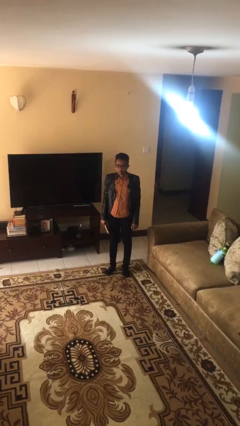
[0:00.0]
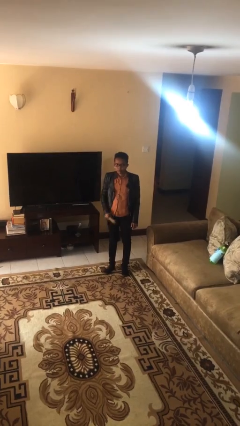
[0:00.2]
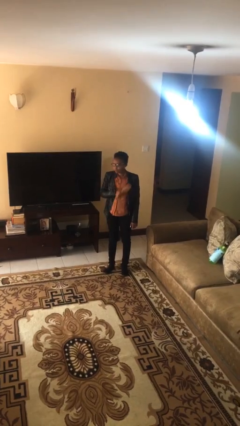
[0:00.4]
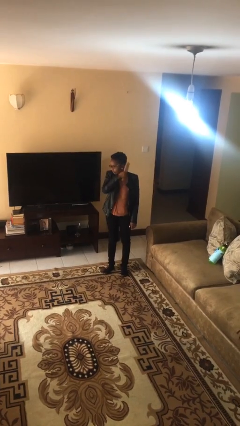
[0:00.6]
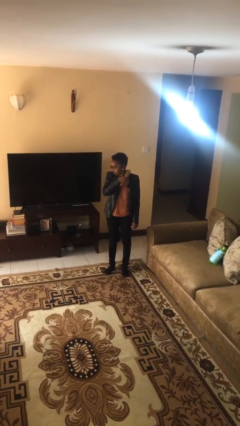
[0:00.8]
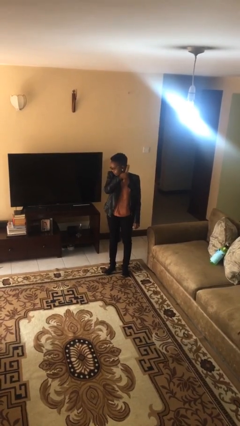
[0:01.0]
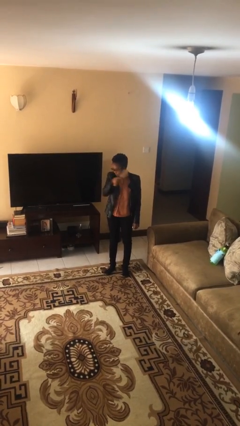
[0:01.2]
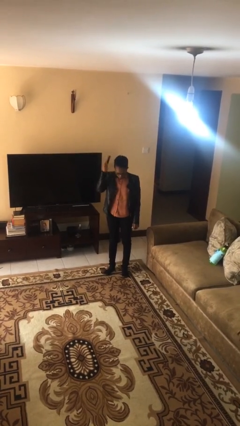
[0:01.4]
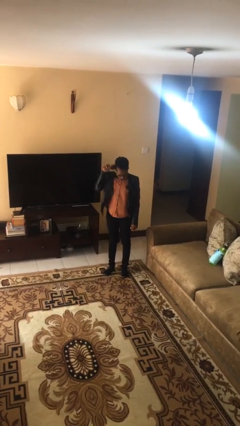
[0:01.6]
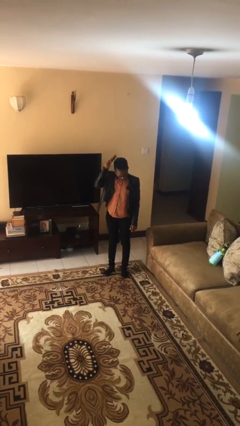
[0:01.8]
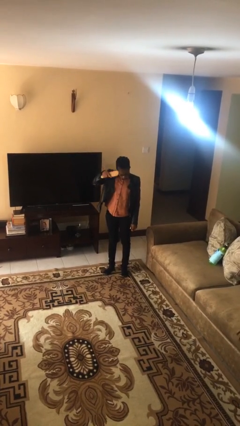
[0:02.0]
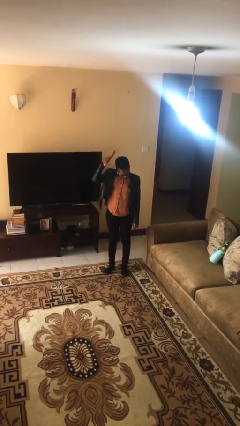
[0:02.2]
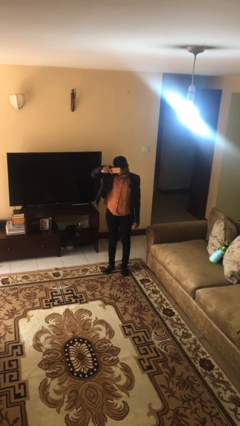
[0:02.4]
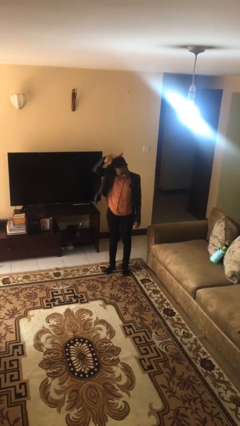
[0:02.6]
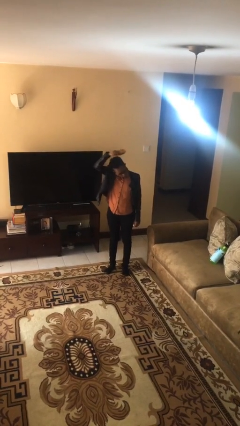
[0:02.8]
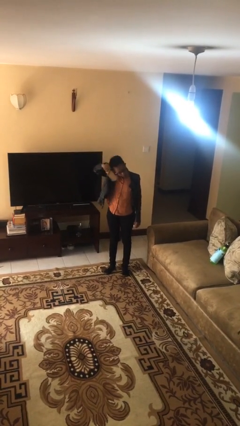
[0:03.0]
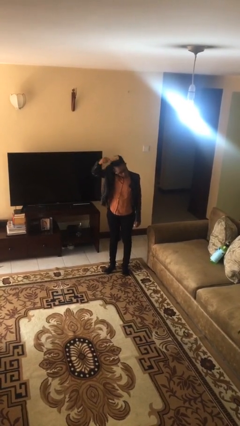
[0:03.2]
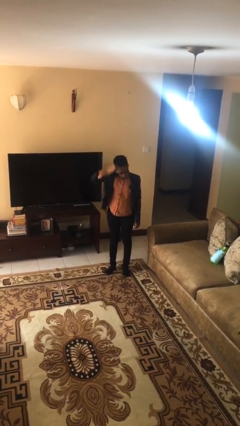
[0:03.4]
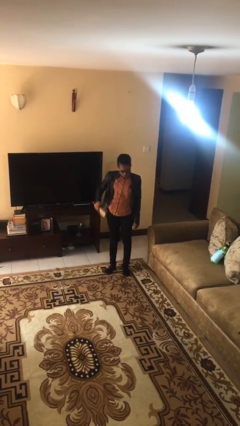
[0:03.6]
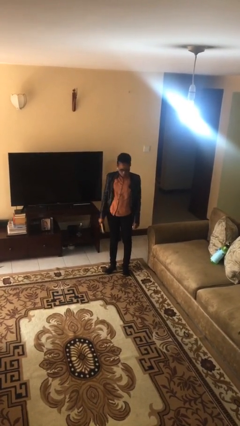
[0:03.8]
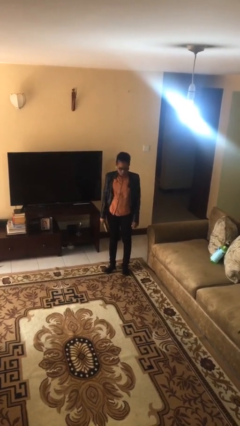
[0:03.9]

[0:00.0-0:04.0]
person brushes hair

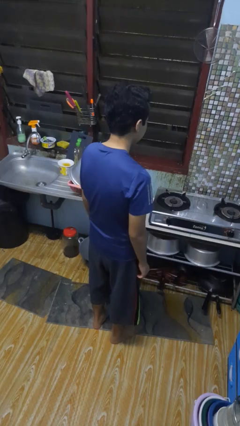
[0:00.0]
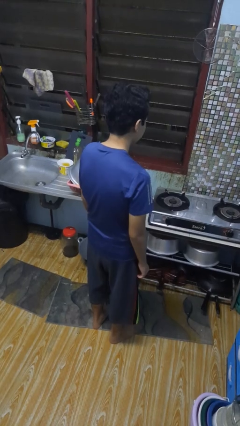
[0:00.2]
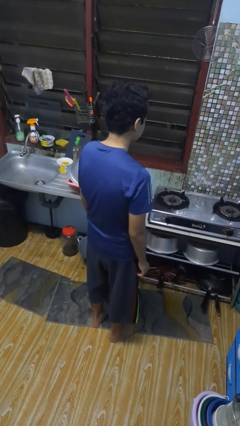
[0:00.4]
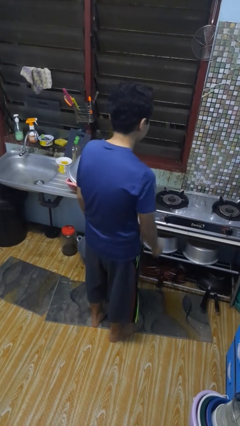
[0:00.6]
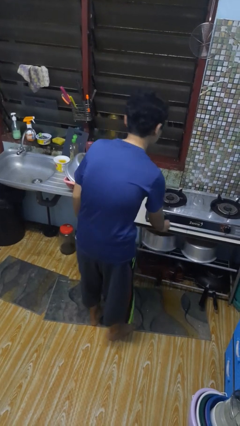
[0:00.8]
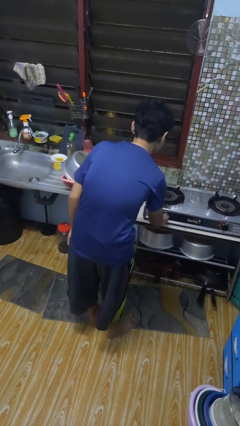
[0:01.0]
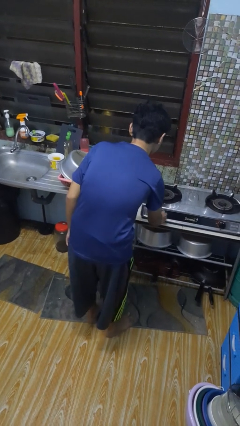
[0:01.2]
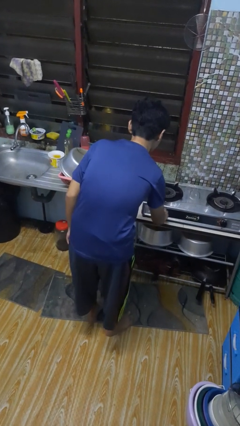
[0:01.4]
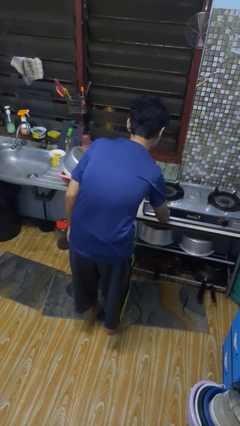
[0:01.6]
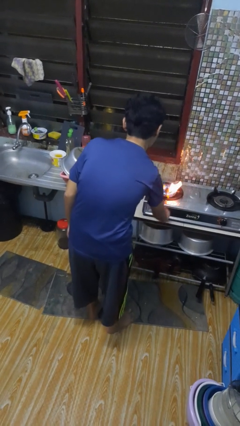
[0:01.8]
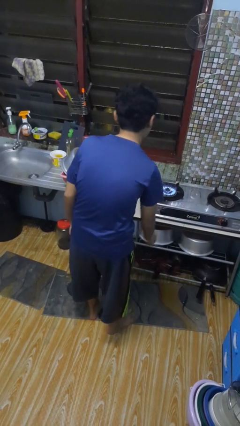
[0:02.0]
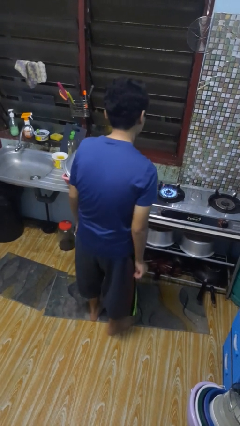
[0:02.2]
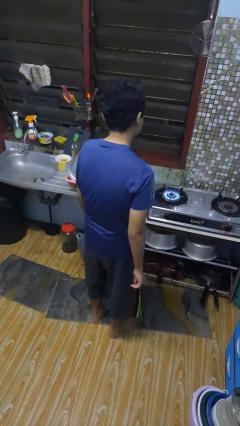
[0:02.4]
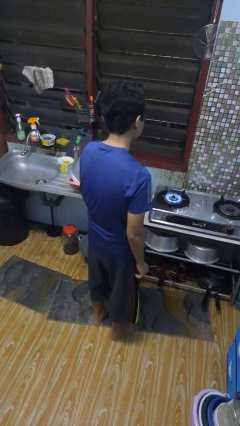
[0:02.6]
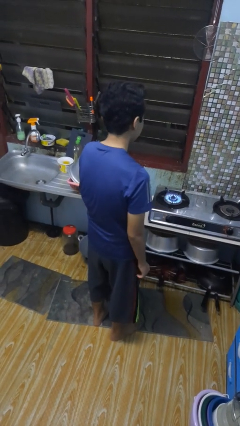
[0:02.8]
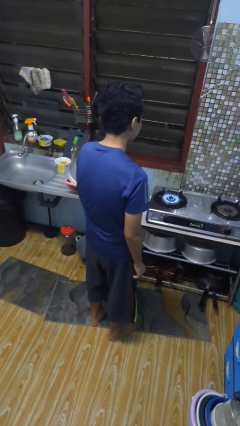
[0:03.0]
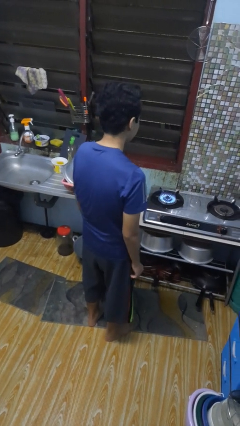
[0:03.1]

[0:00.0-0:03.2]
person turns on stovetop

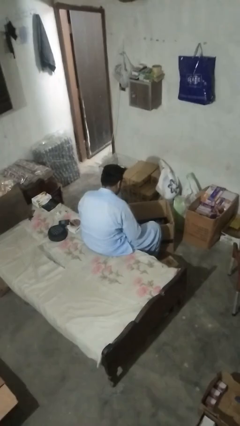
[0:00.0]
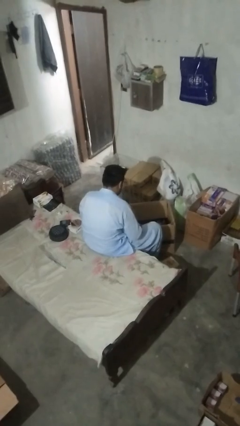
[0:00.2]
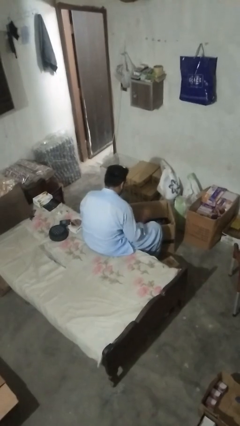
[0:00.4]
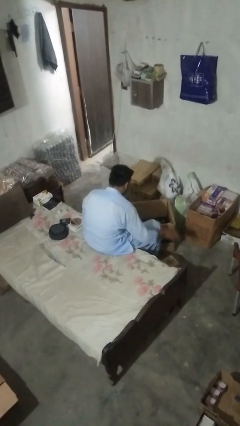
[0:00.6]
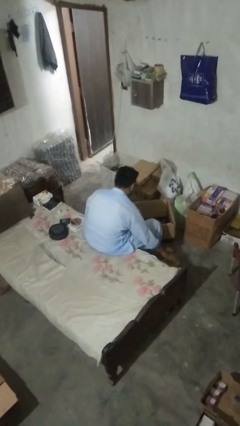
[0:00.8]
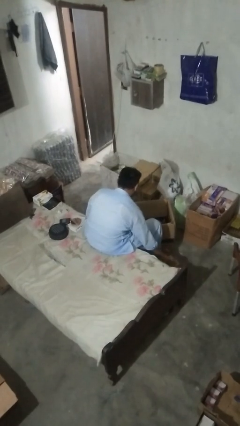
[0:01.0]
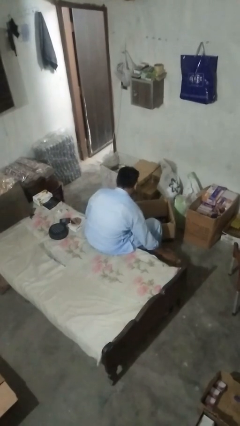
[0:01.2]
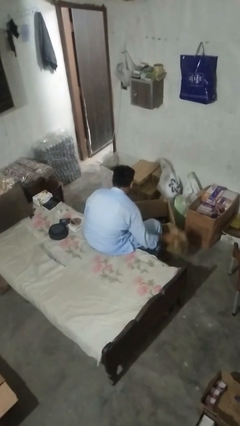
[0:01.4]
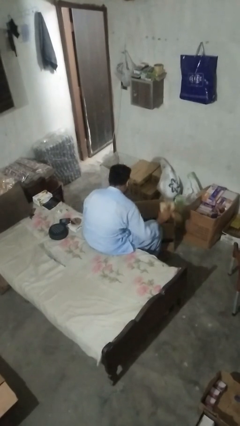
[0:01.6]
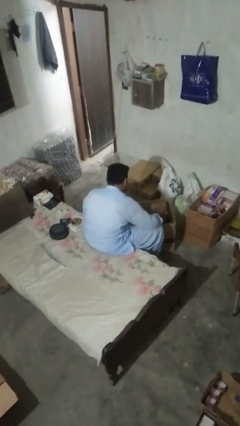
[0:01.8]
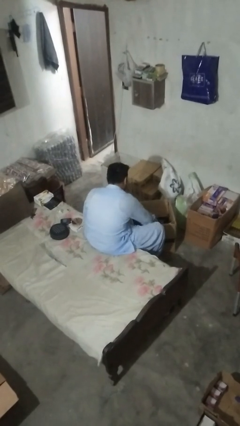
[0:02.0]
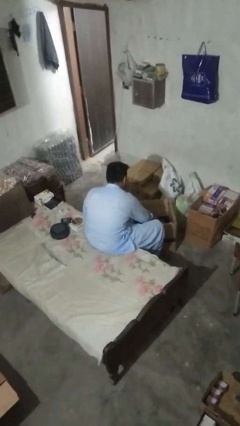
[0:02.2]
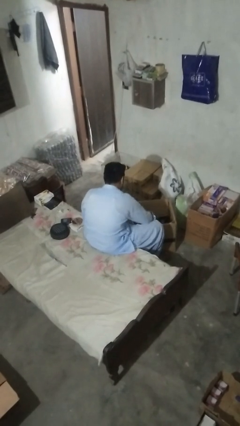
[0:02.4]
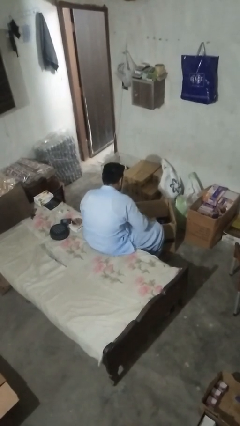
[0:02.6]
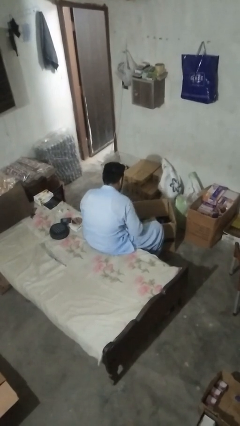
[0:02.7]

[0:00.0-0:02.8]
person puts object into box

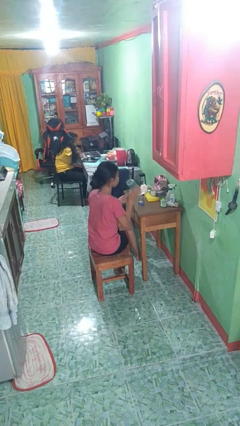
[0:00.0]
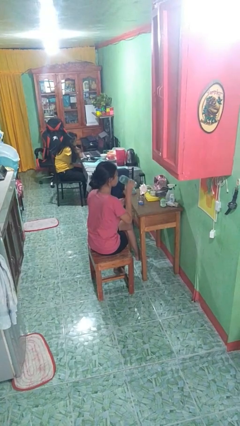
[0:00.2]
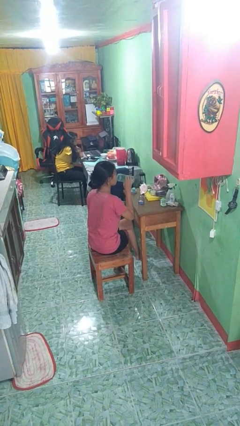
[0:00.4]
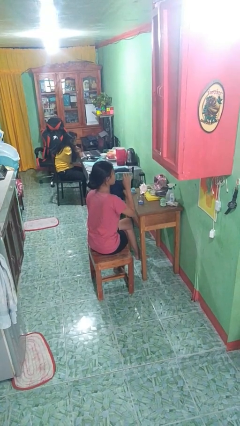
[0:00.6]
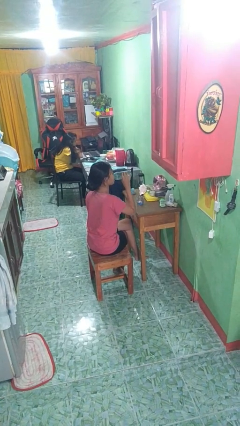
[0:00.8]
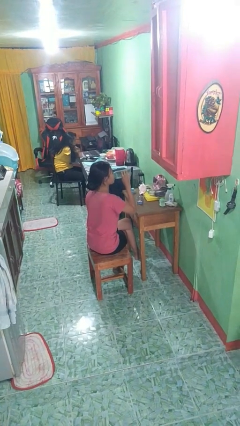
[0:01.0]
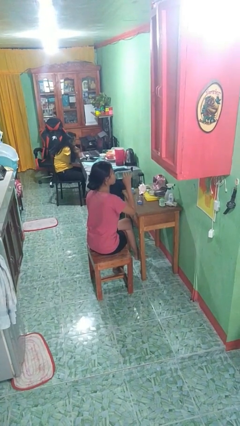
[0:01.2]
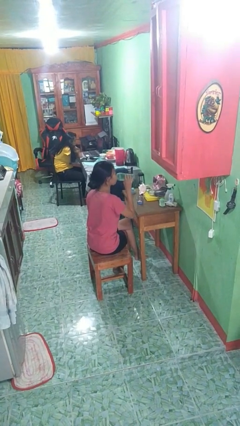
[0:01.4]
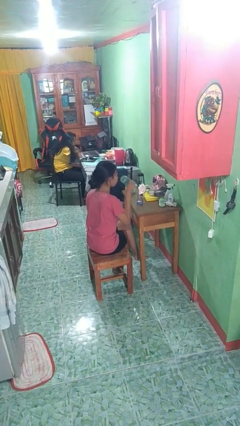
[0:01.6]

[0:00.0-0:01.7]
person drinks from cup

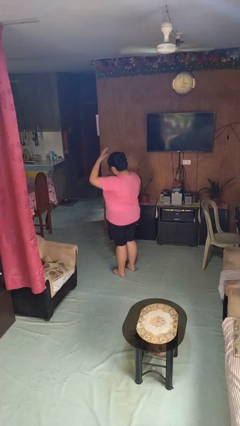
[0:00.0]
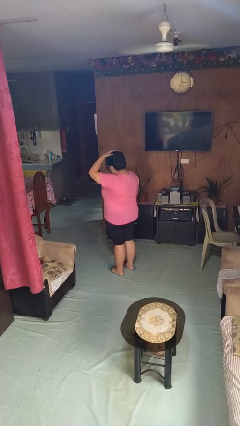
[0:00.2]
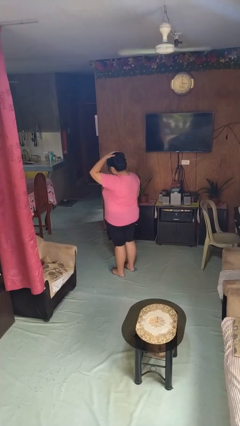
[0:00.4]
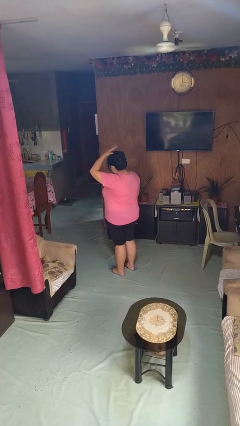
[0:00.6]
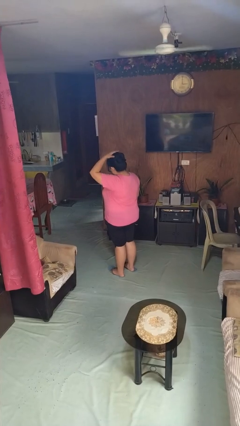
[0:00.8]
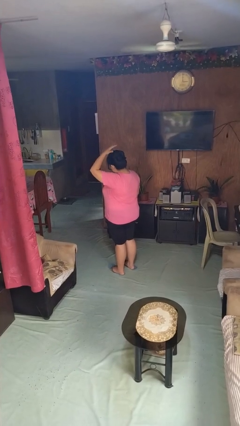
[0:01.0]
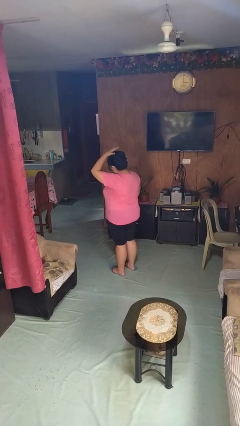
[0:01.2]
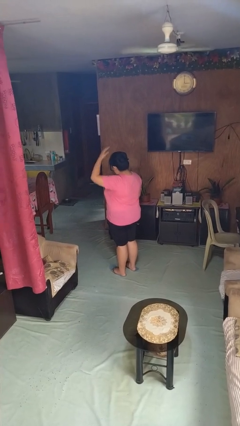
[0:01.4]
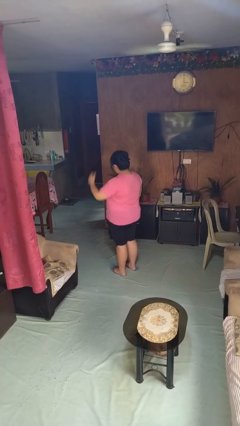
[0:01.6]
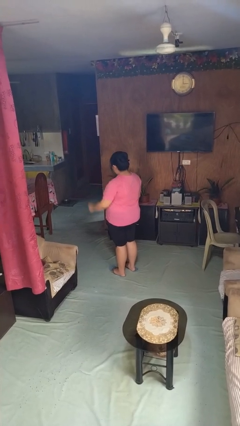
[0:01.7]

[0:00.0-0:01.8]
person pats head

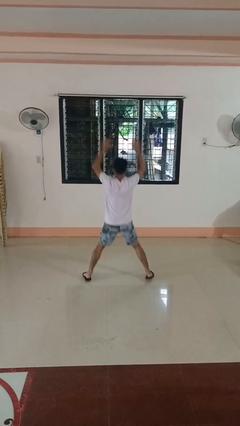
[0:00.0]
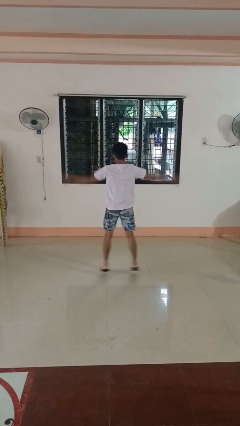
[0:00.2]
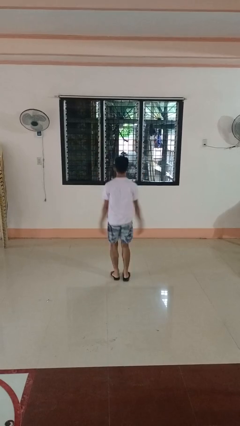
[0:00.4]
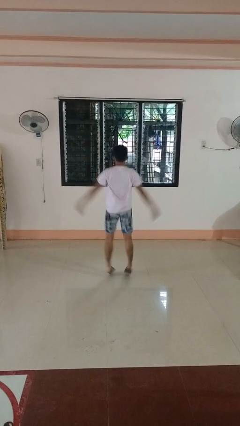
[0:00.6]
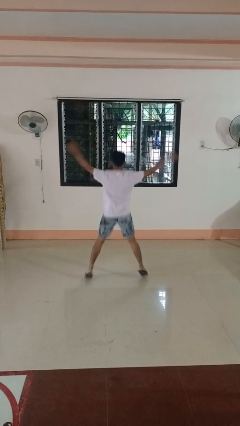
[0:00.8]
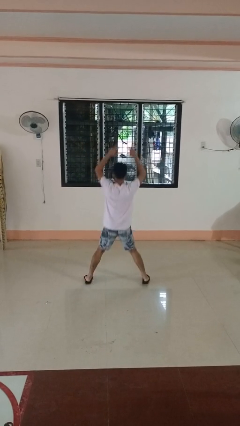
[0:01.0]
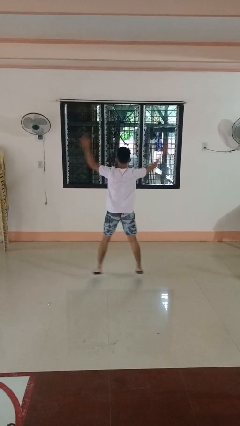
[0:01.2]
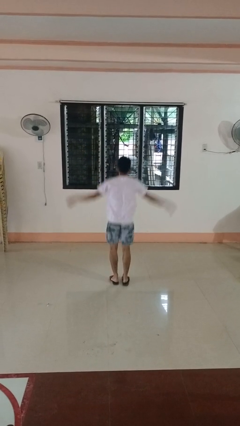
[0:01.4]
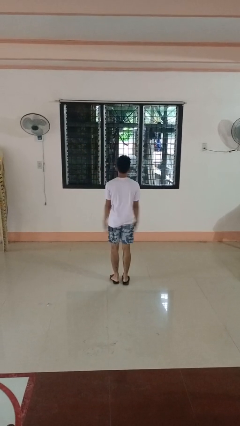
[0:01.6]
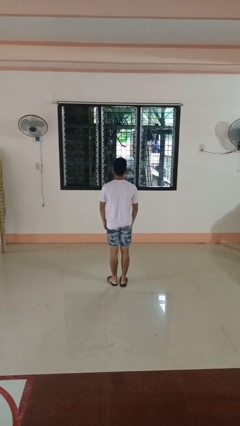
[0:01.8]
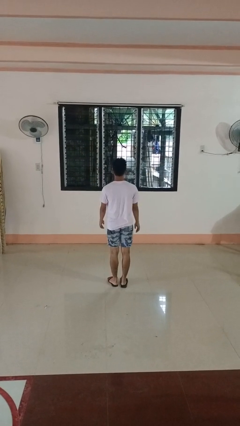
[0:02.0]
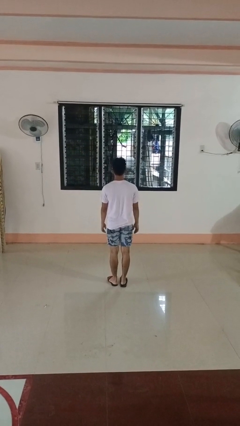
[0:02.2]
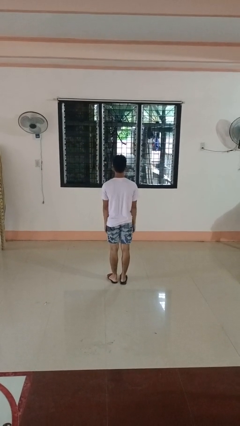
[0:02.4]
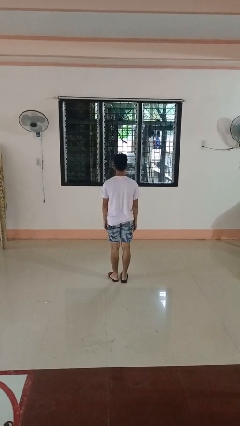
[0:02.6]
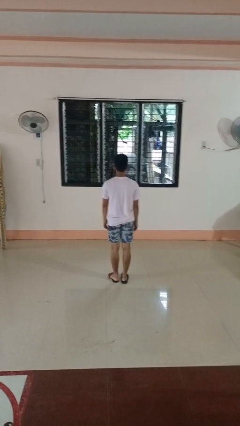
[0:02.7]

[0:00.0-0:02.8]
person exercises with jumping jacks

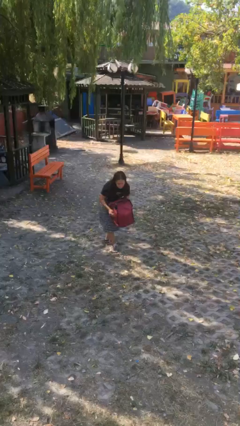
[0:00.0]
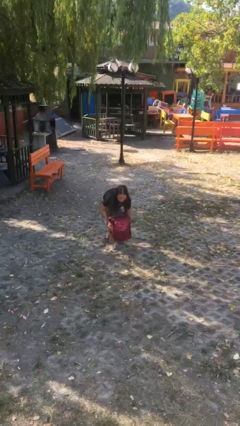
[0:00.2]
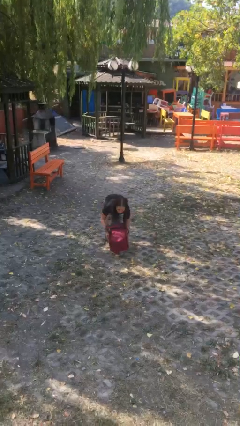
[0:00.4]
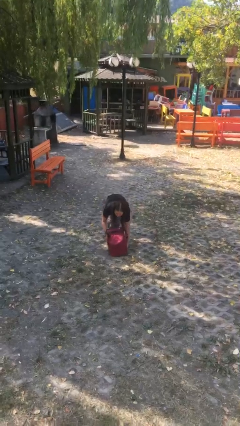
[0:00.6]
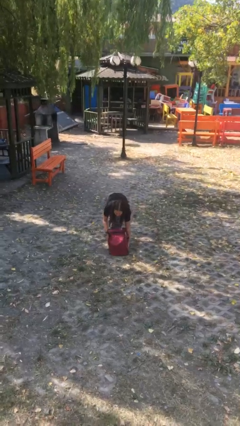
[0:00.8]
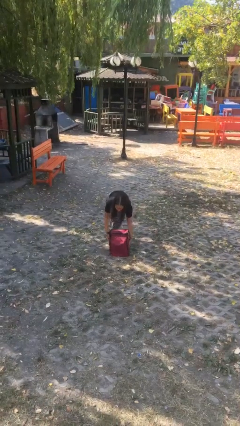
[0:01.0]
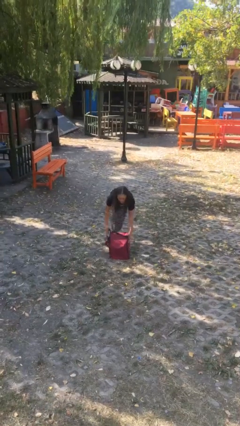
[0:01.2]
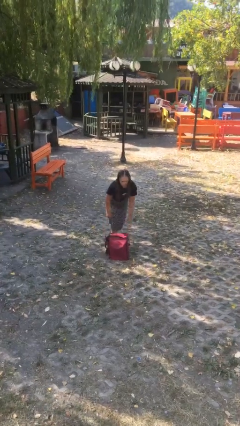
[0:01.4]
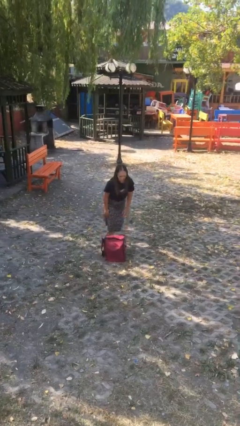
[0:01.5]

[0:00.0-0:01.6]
person puts down object on floor
